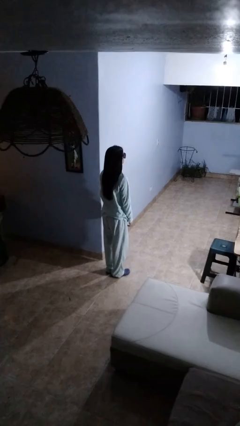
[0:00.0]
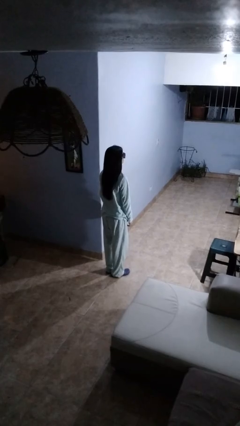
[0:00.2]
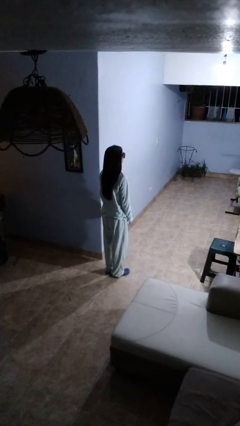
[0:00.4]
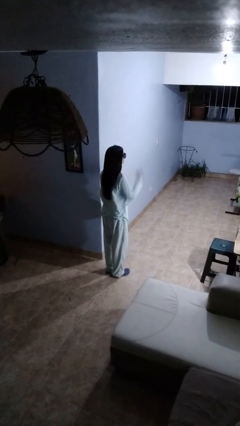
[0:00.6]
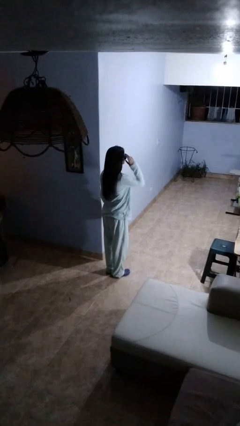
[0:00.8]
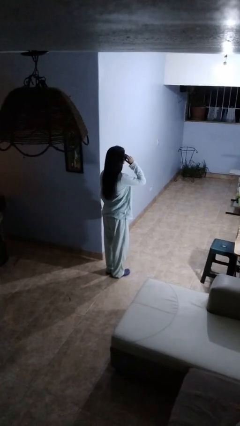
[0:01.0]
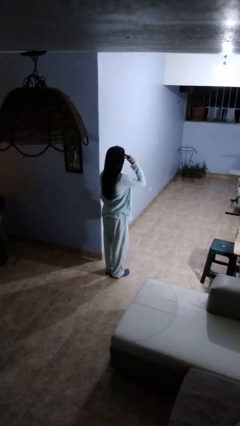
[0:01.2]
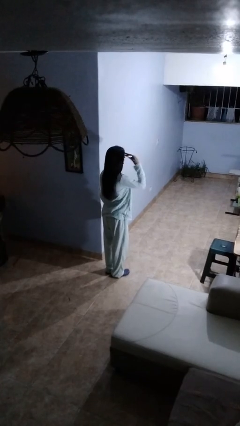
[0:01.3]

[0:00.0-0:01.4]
person takes off sunglasses

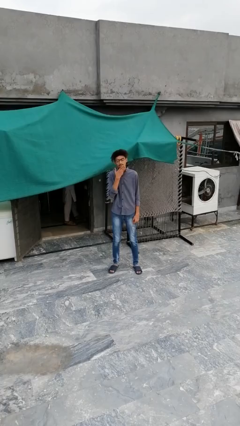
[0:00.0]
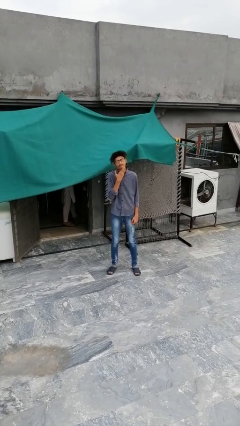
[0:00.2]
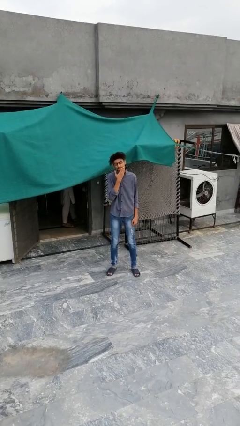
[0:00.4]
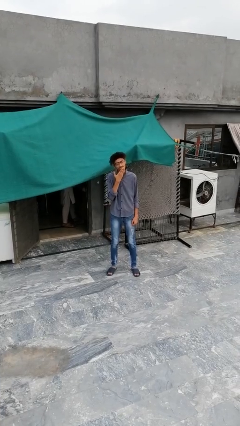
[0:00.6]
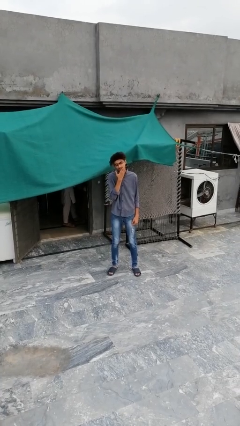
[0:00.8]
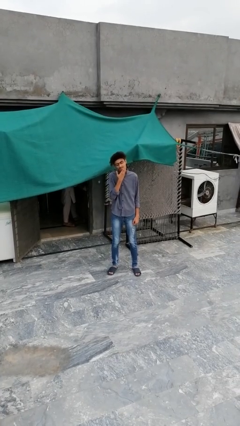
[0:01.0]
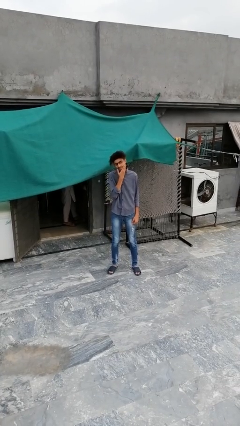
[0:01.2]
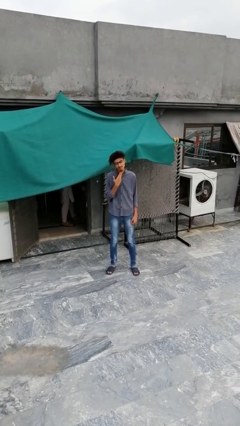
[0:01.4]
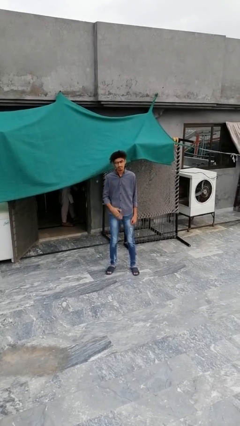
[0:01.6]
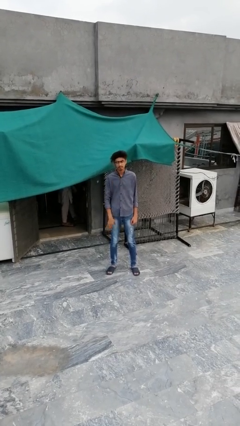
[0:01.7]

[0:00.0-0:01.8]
person strokes chin

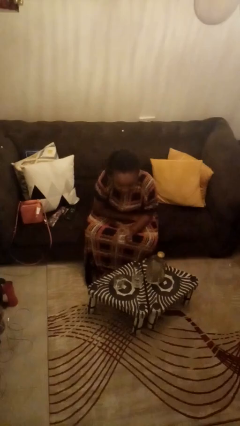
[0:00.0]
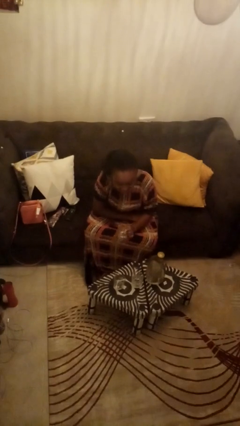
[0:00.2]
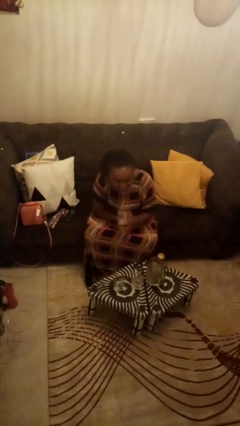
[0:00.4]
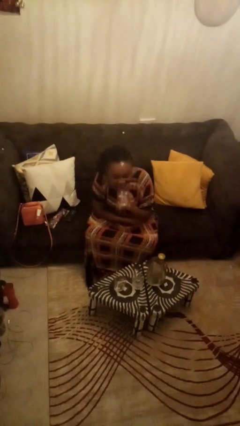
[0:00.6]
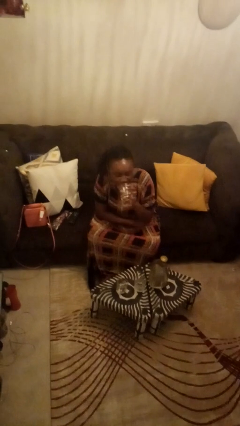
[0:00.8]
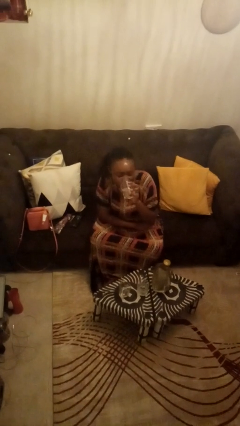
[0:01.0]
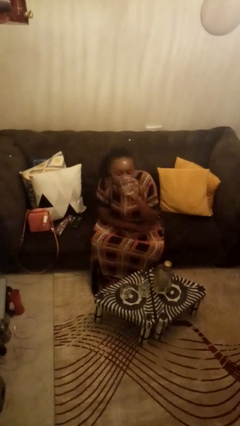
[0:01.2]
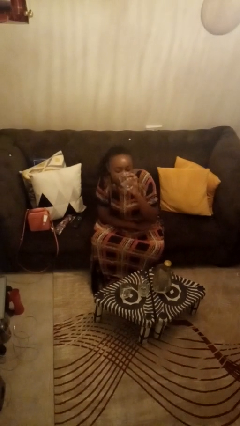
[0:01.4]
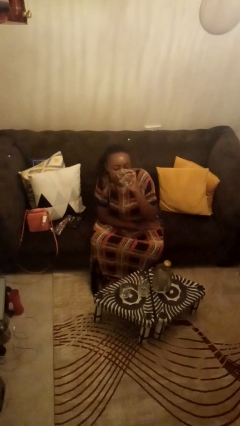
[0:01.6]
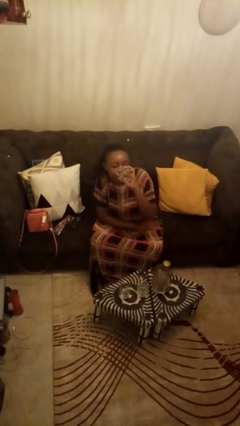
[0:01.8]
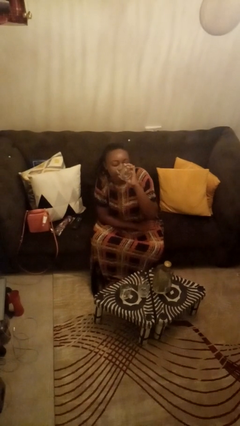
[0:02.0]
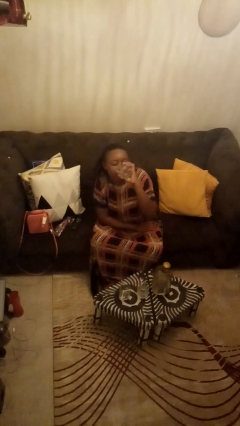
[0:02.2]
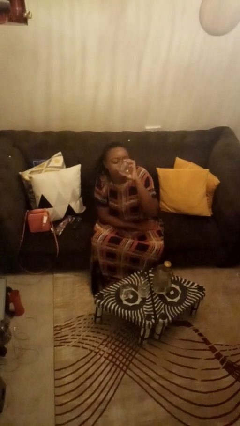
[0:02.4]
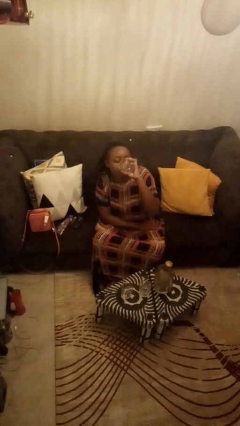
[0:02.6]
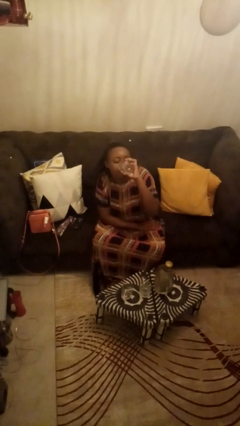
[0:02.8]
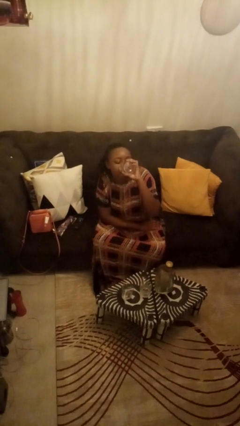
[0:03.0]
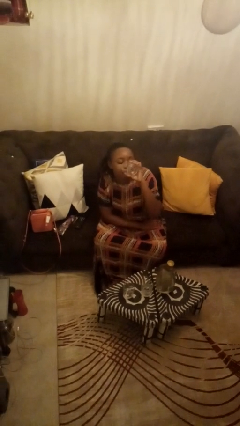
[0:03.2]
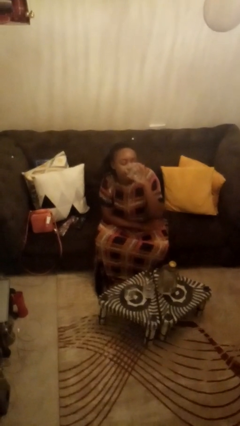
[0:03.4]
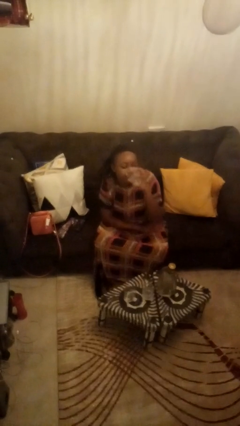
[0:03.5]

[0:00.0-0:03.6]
person drinks from shotglass

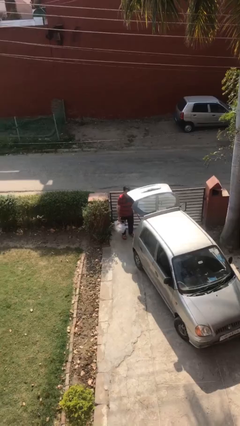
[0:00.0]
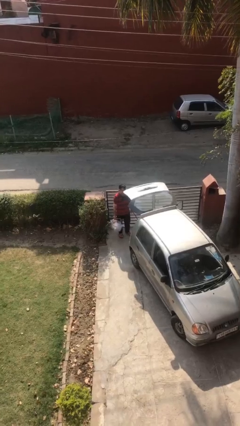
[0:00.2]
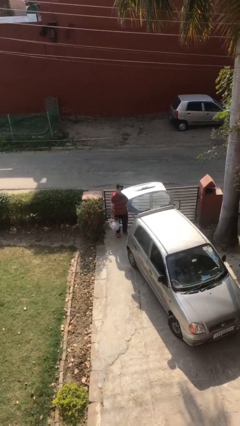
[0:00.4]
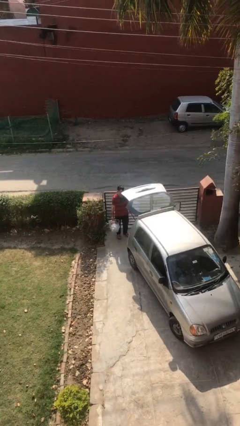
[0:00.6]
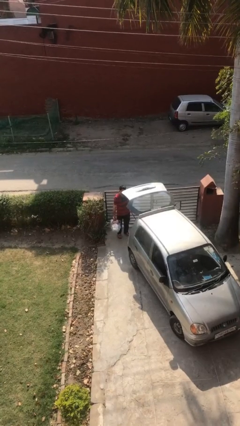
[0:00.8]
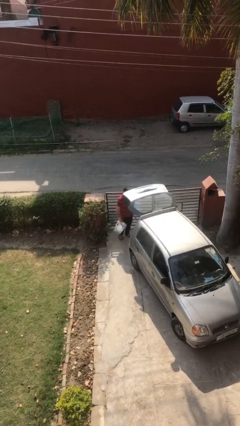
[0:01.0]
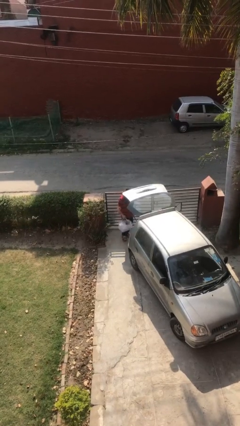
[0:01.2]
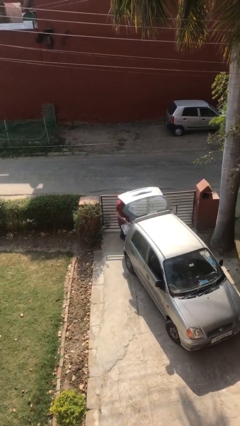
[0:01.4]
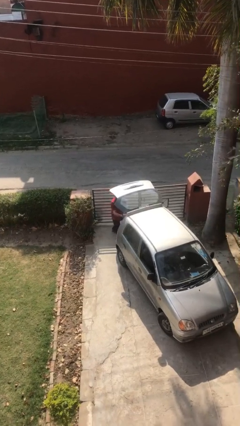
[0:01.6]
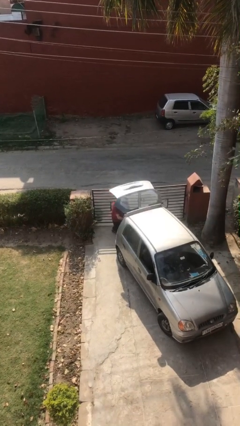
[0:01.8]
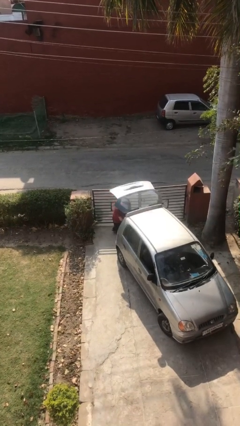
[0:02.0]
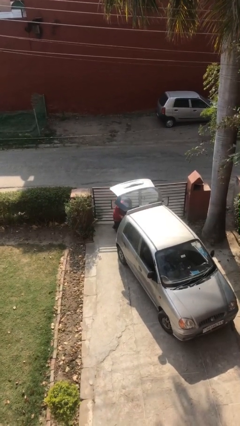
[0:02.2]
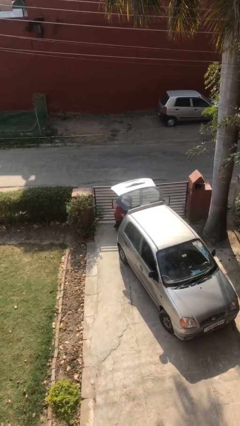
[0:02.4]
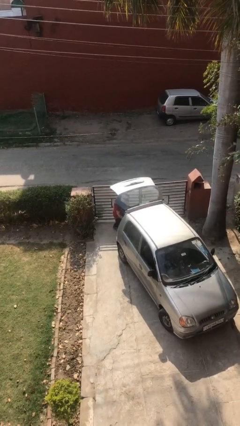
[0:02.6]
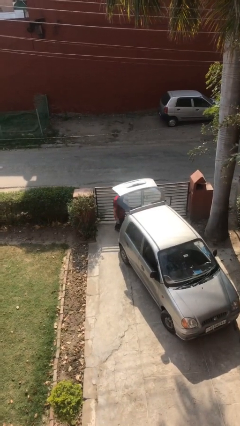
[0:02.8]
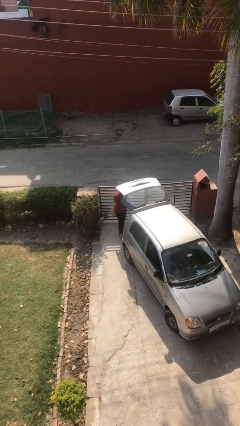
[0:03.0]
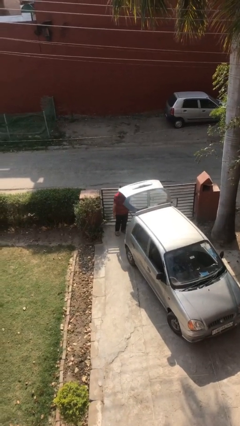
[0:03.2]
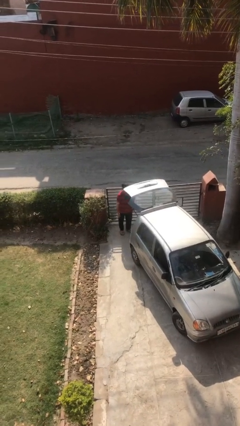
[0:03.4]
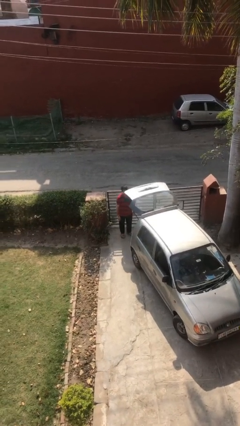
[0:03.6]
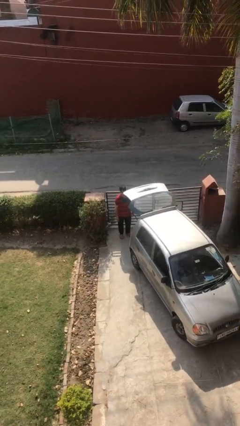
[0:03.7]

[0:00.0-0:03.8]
person loads car

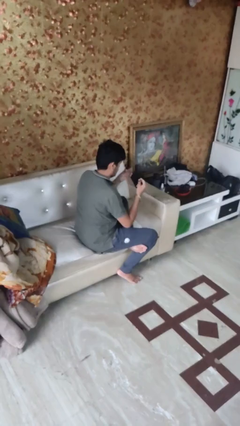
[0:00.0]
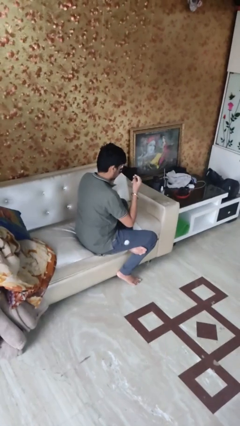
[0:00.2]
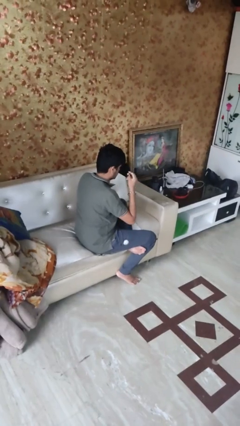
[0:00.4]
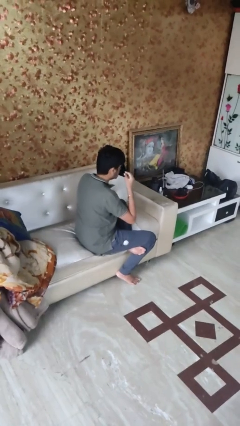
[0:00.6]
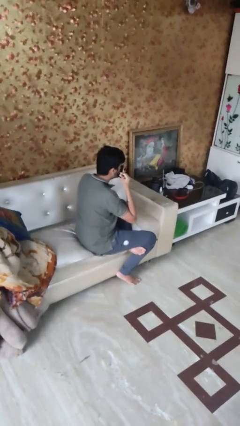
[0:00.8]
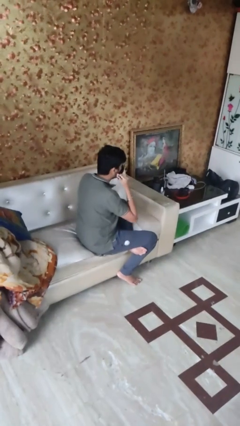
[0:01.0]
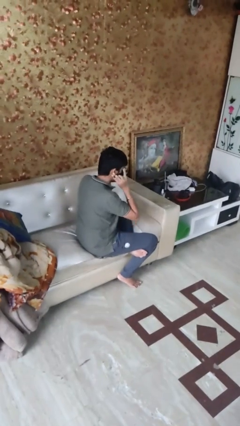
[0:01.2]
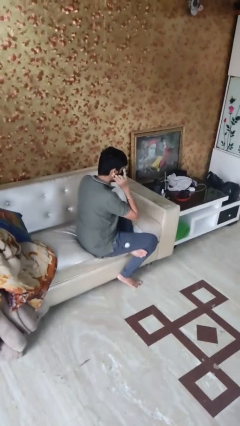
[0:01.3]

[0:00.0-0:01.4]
person puts on facemask

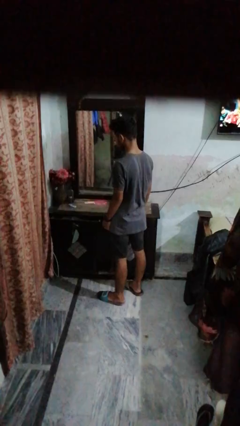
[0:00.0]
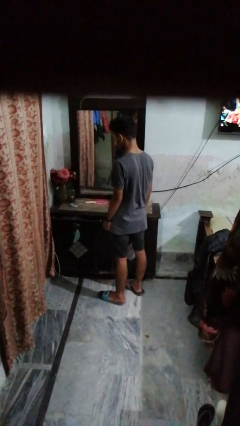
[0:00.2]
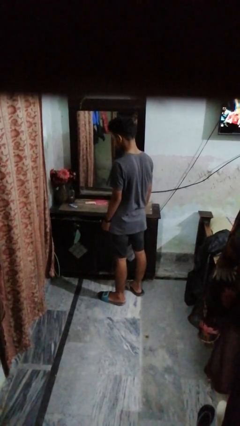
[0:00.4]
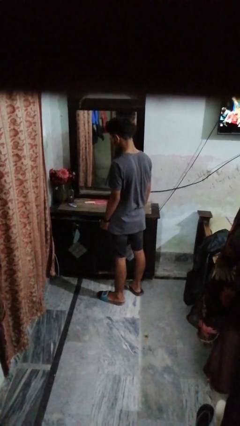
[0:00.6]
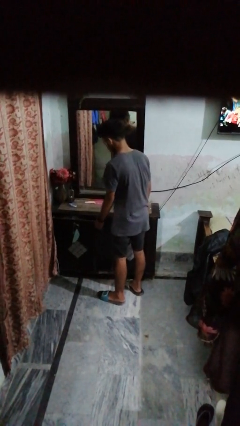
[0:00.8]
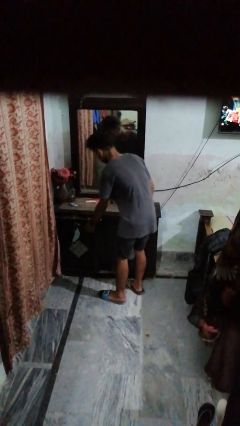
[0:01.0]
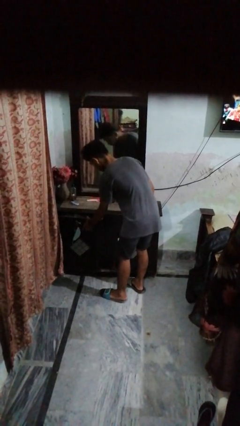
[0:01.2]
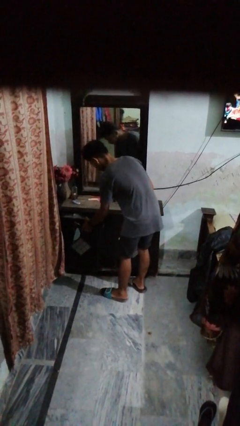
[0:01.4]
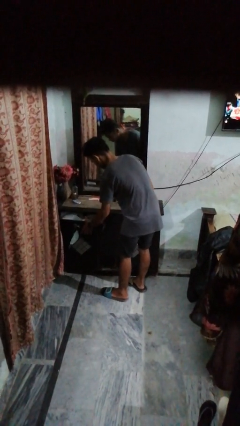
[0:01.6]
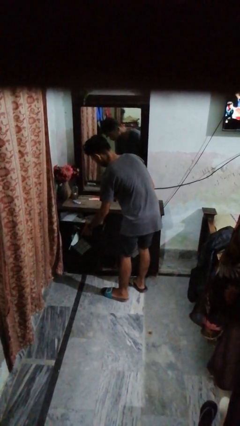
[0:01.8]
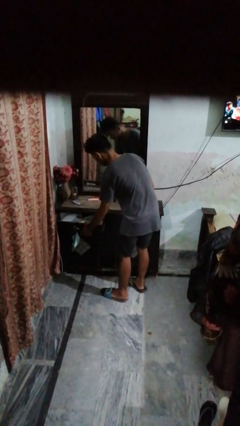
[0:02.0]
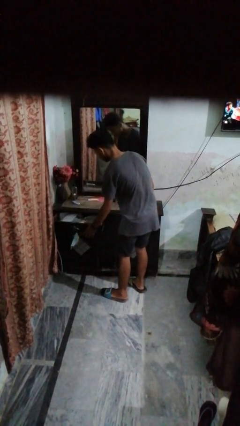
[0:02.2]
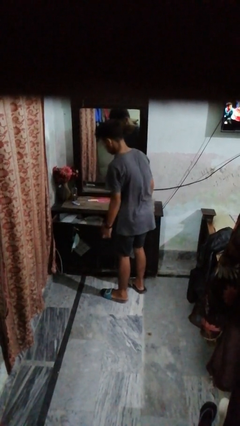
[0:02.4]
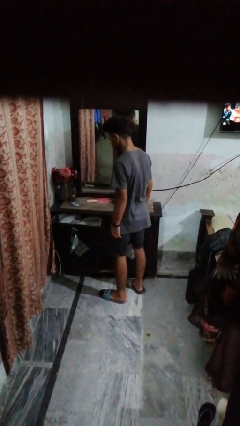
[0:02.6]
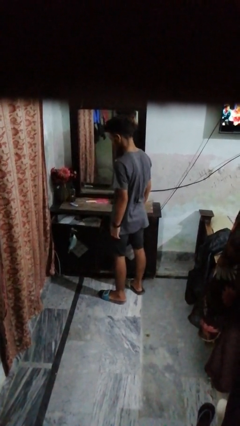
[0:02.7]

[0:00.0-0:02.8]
person opens dresser drawer

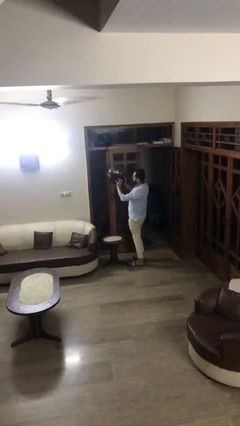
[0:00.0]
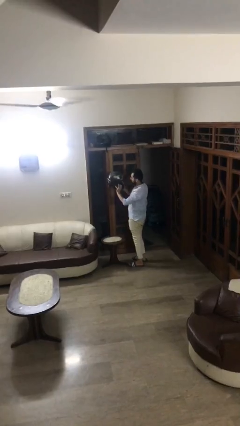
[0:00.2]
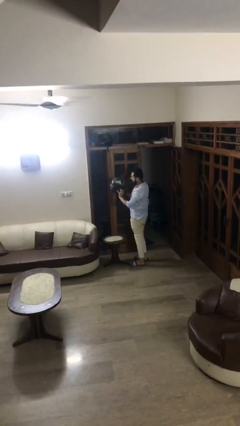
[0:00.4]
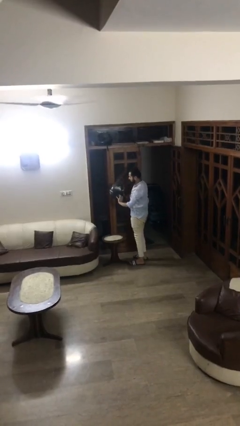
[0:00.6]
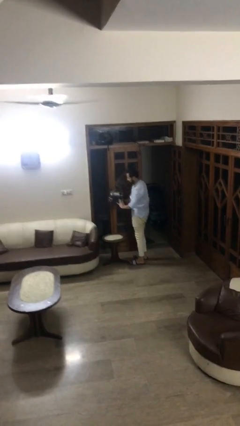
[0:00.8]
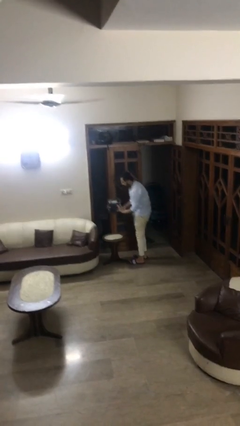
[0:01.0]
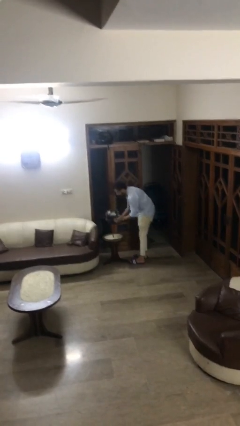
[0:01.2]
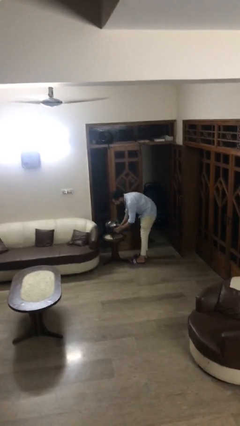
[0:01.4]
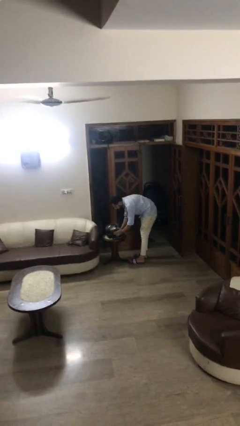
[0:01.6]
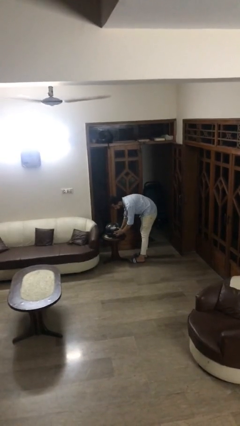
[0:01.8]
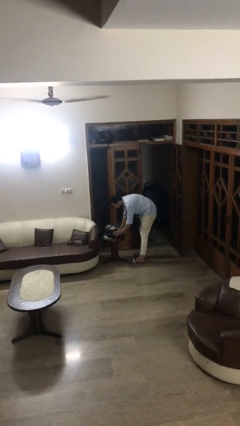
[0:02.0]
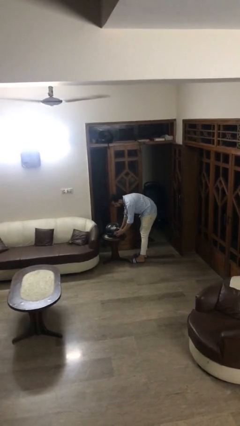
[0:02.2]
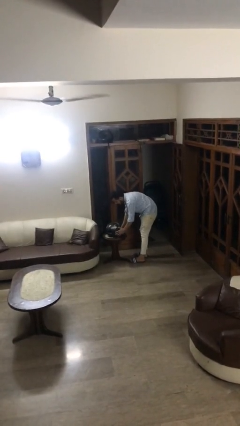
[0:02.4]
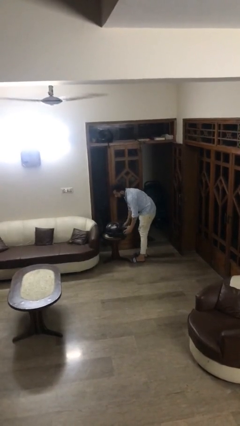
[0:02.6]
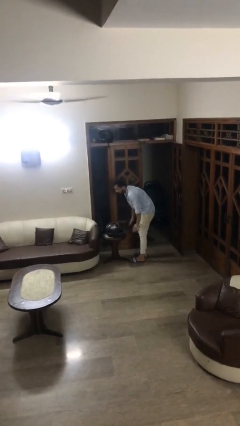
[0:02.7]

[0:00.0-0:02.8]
person puts down object on table
